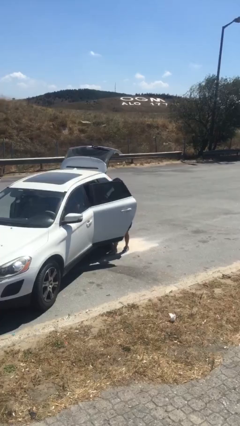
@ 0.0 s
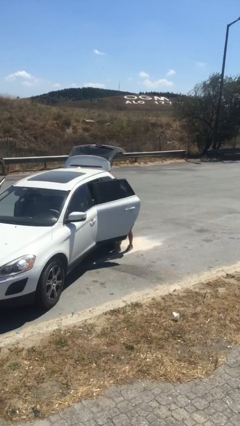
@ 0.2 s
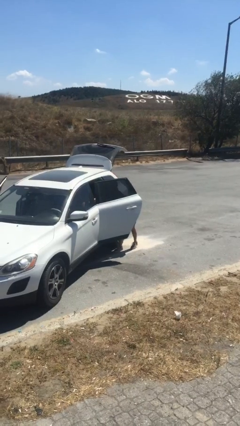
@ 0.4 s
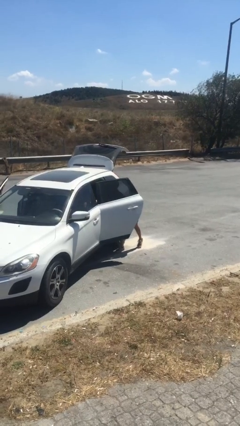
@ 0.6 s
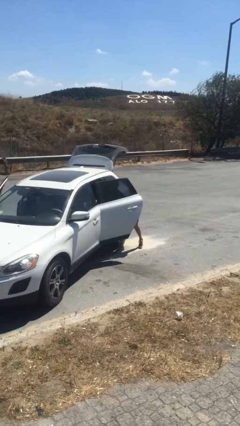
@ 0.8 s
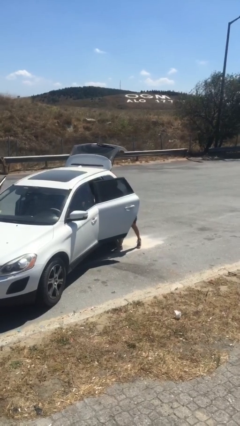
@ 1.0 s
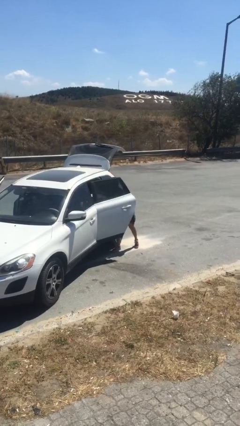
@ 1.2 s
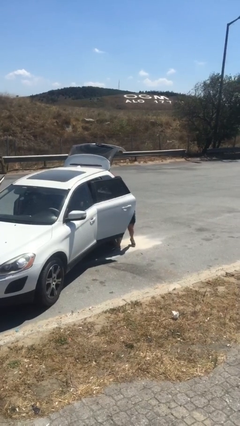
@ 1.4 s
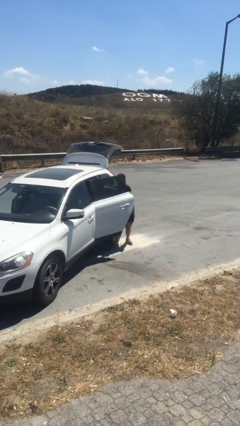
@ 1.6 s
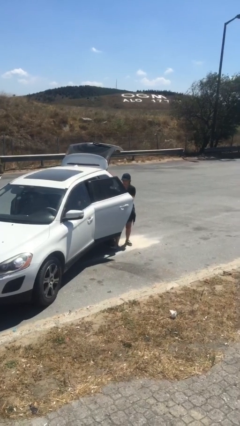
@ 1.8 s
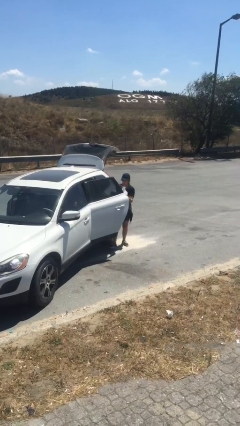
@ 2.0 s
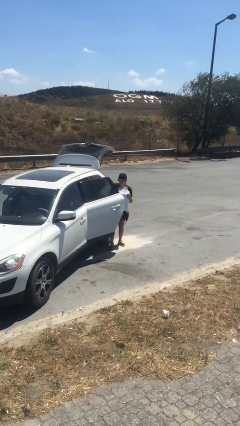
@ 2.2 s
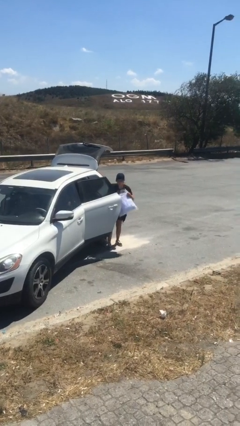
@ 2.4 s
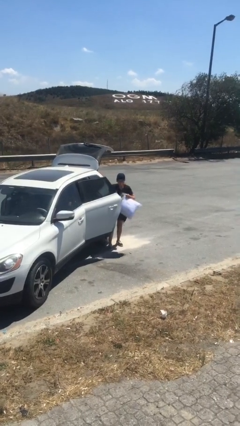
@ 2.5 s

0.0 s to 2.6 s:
person unloads car

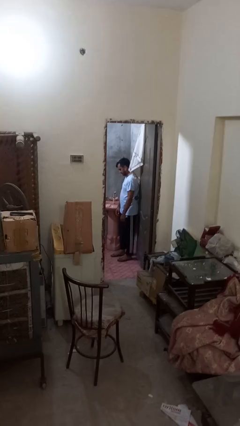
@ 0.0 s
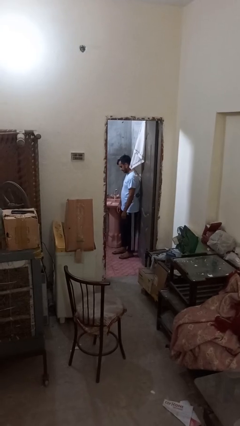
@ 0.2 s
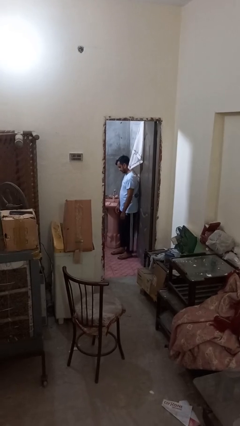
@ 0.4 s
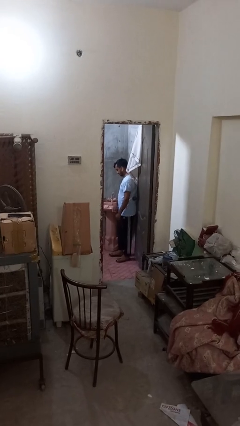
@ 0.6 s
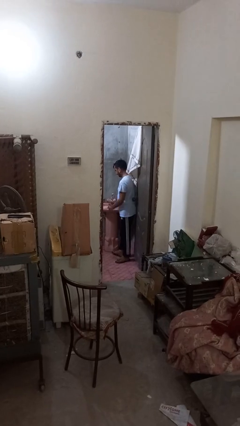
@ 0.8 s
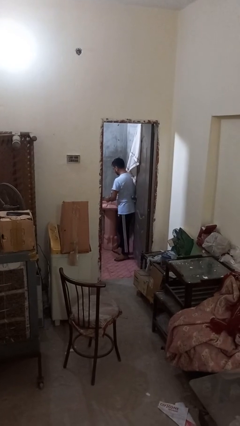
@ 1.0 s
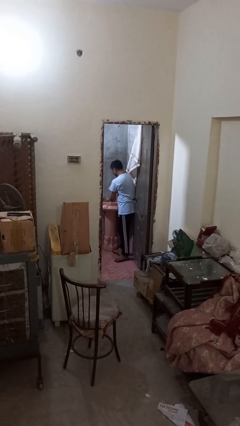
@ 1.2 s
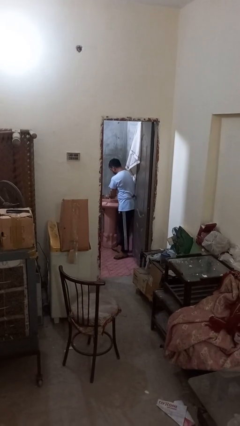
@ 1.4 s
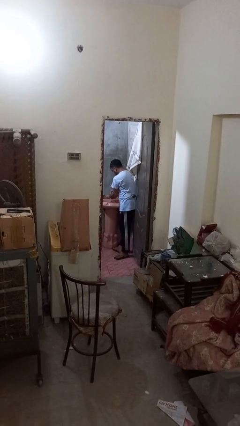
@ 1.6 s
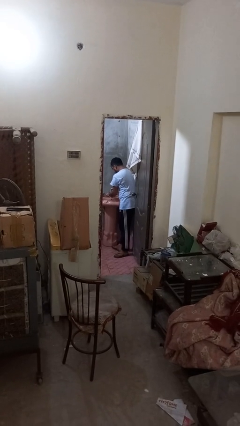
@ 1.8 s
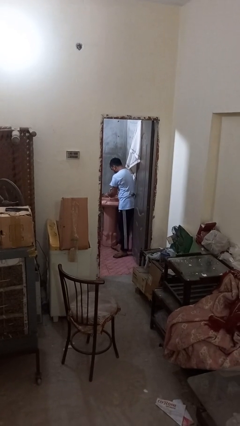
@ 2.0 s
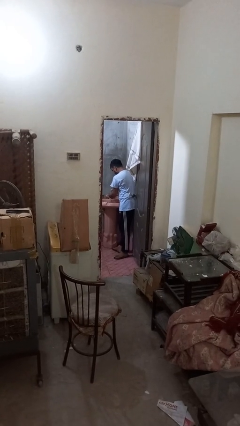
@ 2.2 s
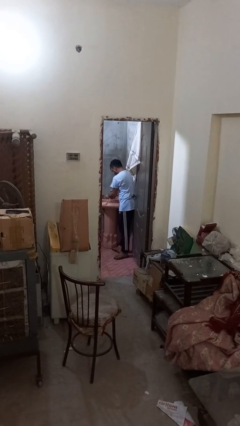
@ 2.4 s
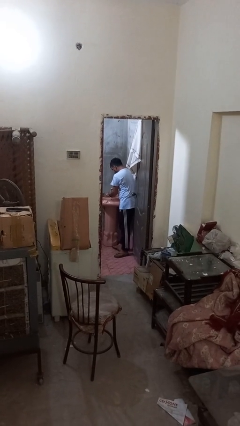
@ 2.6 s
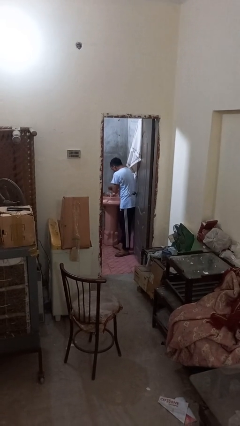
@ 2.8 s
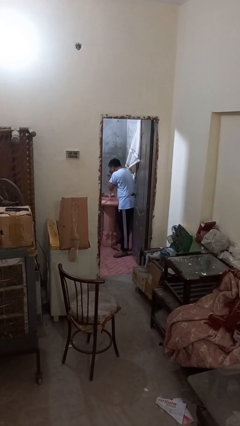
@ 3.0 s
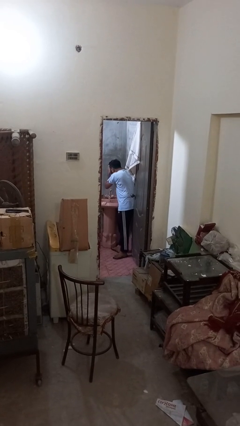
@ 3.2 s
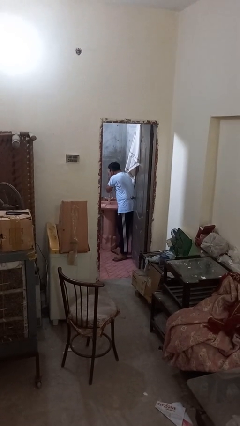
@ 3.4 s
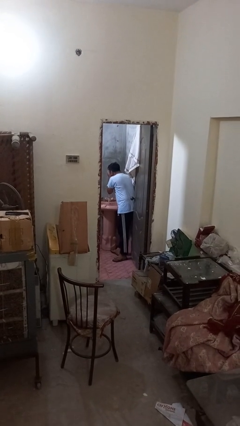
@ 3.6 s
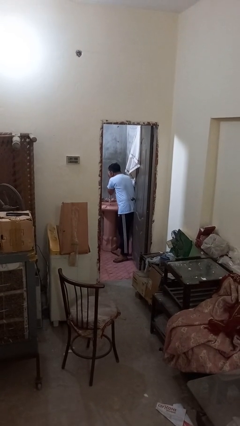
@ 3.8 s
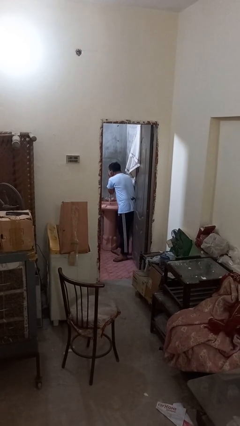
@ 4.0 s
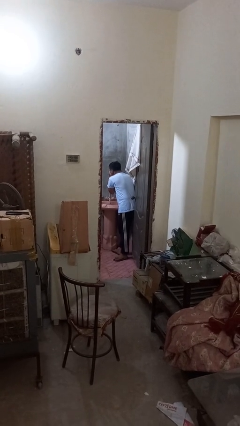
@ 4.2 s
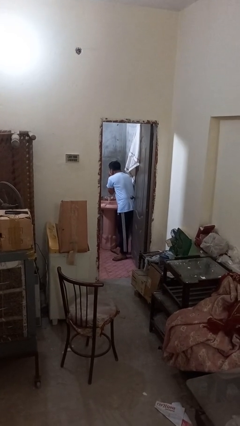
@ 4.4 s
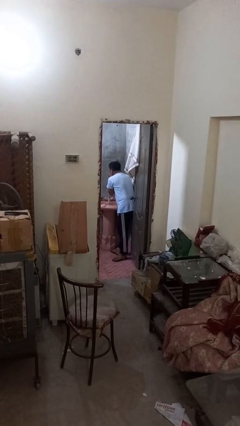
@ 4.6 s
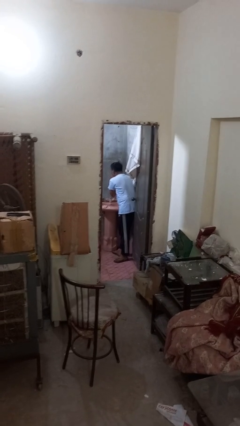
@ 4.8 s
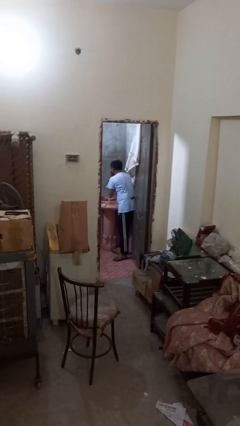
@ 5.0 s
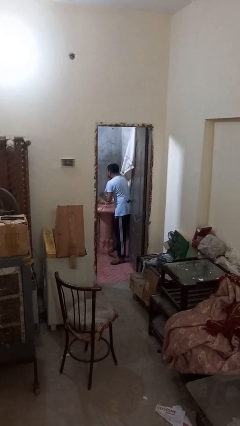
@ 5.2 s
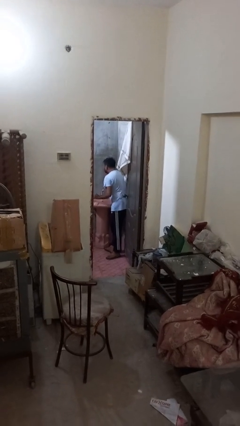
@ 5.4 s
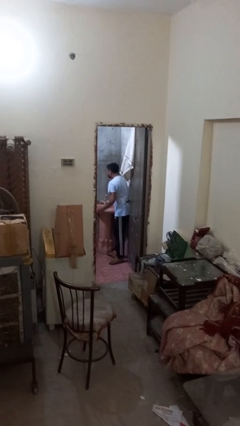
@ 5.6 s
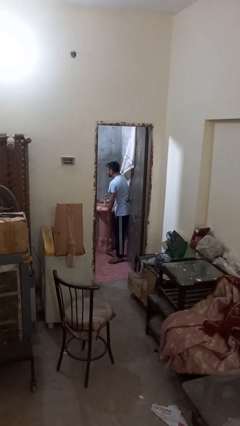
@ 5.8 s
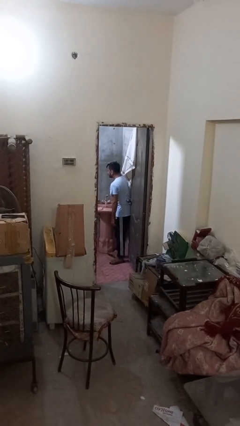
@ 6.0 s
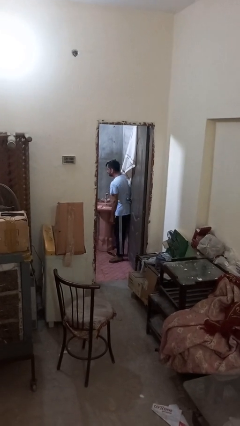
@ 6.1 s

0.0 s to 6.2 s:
person washes face

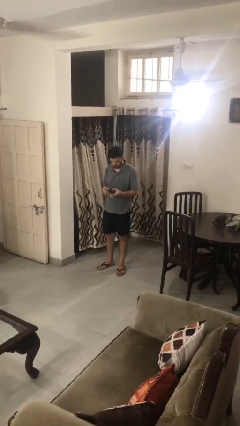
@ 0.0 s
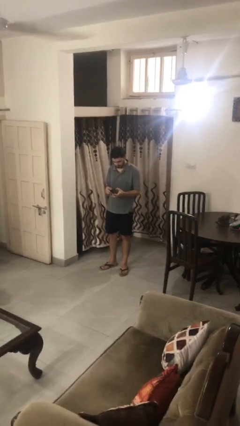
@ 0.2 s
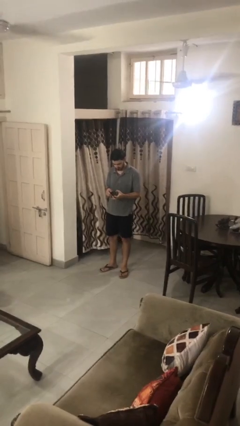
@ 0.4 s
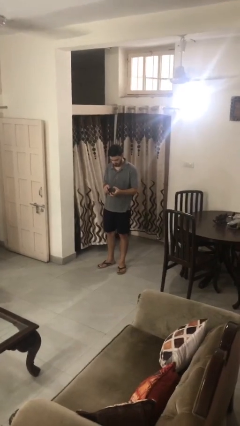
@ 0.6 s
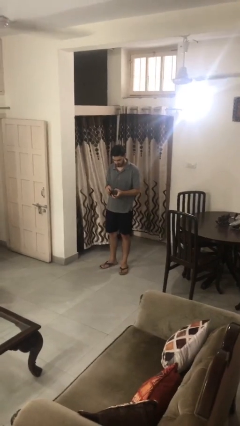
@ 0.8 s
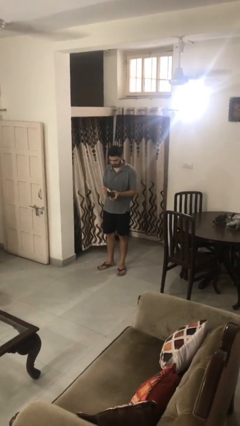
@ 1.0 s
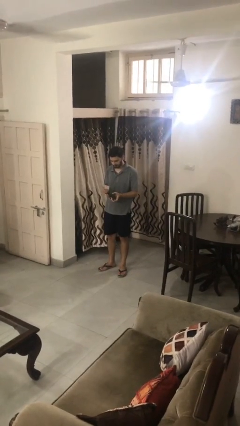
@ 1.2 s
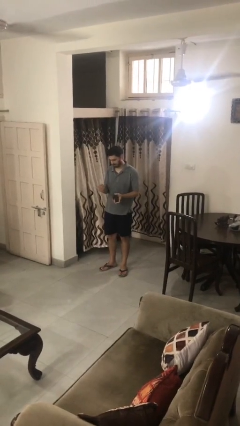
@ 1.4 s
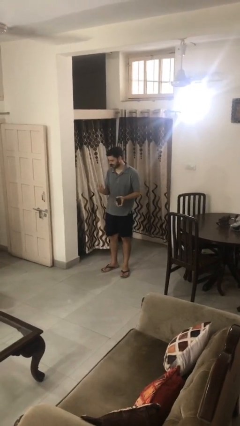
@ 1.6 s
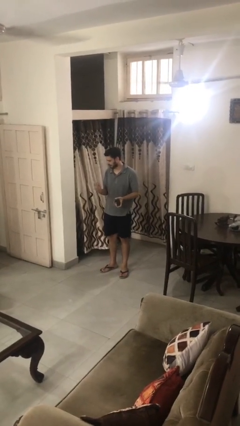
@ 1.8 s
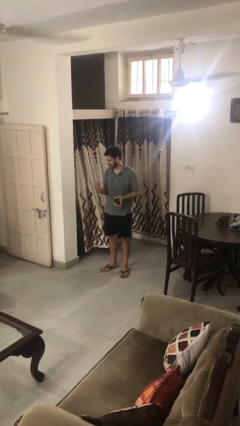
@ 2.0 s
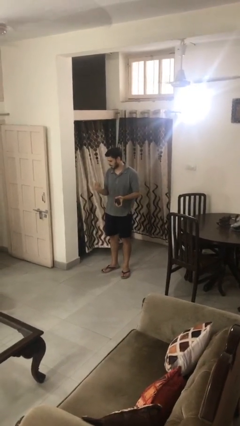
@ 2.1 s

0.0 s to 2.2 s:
person takes object from purse

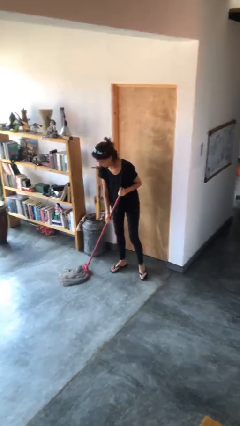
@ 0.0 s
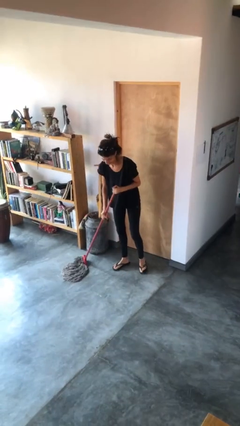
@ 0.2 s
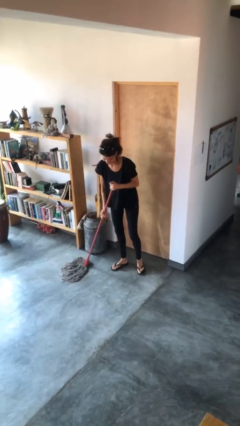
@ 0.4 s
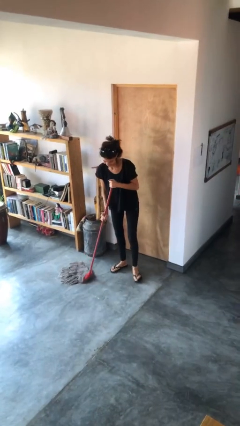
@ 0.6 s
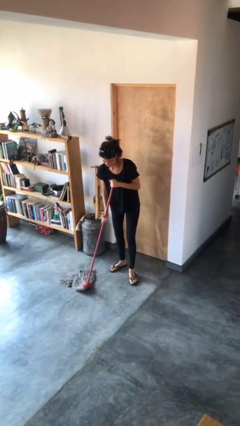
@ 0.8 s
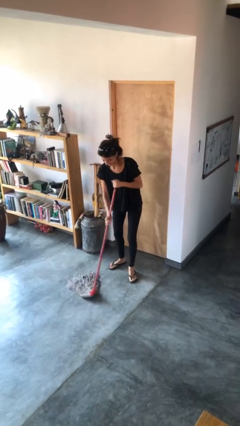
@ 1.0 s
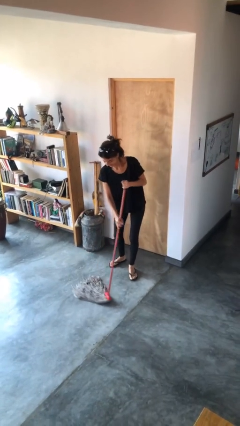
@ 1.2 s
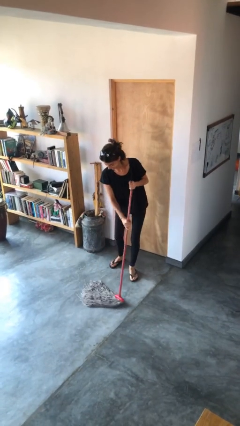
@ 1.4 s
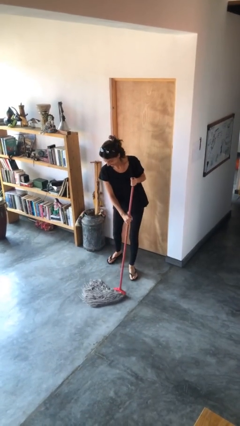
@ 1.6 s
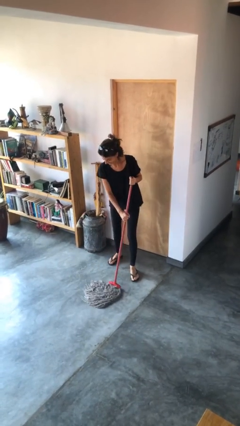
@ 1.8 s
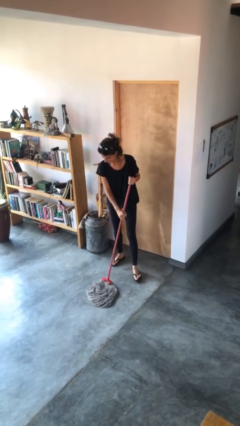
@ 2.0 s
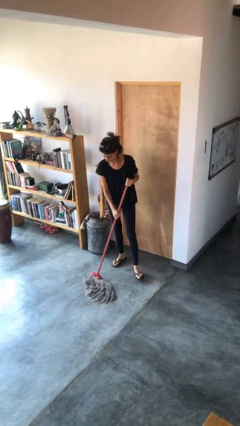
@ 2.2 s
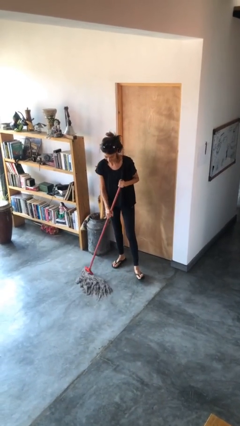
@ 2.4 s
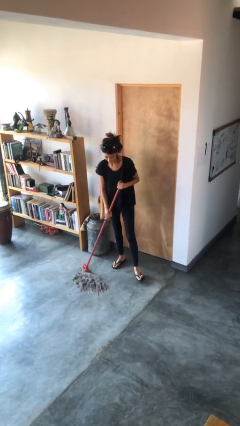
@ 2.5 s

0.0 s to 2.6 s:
person mops

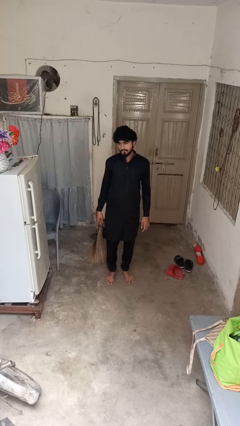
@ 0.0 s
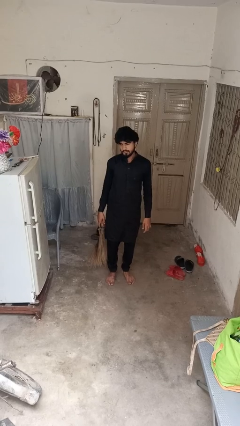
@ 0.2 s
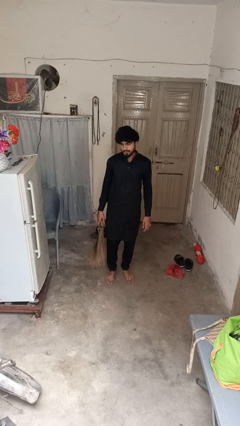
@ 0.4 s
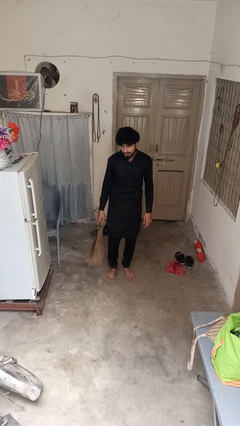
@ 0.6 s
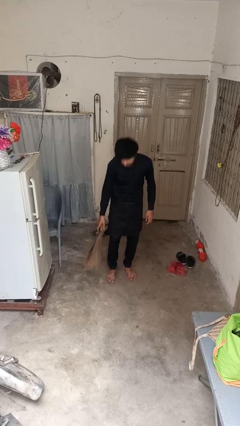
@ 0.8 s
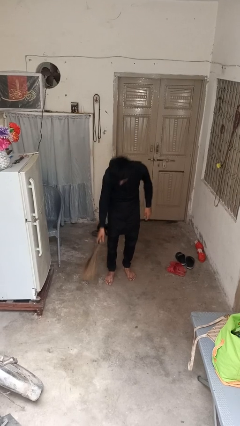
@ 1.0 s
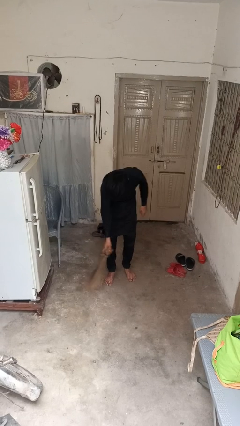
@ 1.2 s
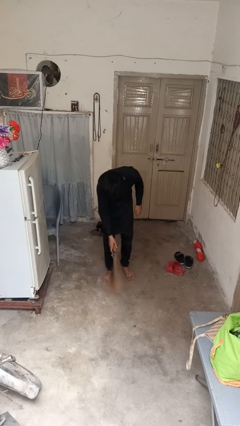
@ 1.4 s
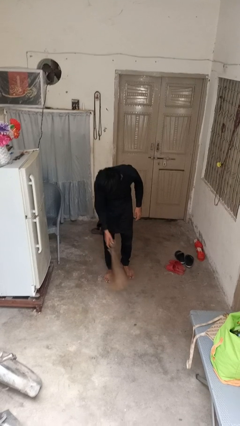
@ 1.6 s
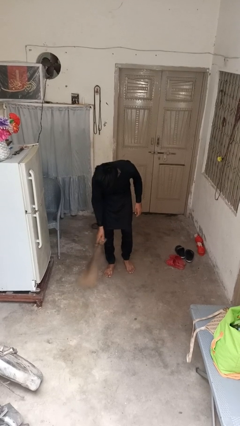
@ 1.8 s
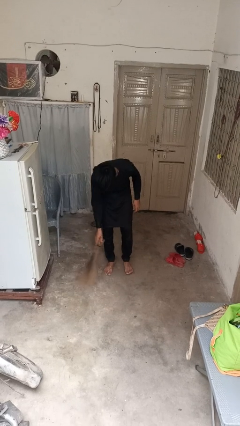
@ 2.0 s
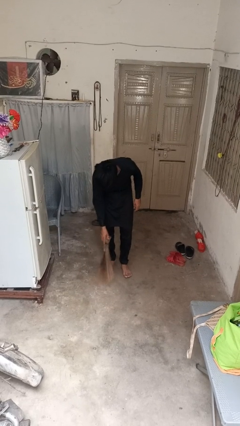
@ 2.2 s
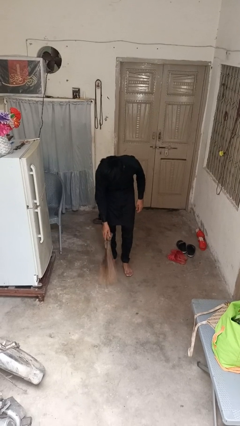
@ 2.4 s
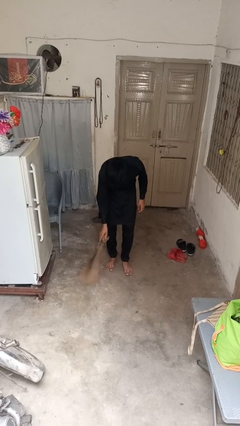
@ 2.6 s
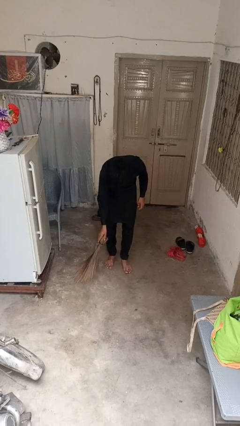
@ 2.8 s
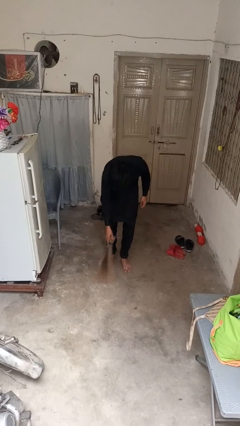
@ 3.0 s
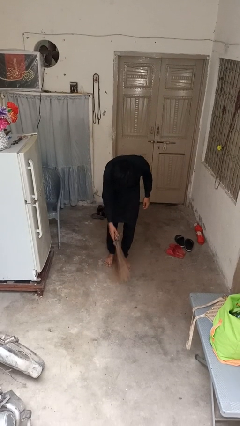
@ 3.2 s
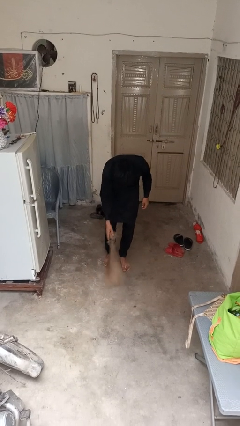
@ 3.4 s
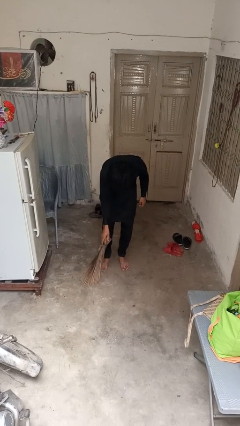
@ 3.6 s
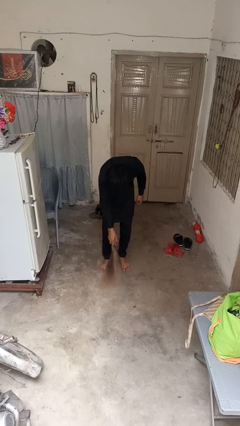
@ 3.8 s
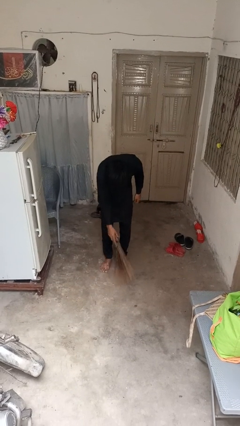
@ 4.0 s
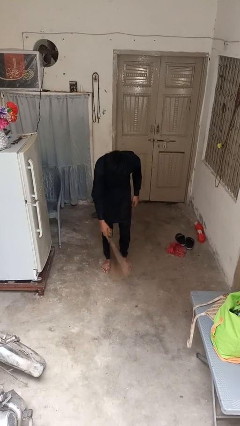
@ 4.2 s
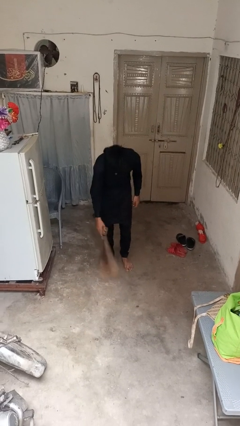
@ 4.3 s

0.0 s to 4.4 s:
person sweeps floor
